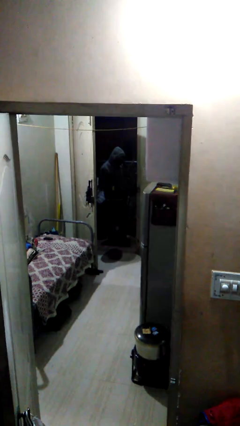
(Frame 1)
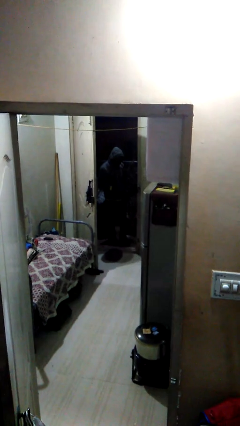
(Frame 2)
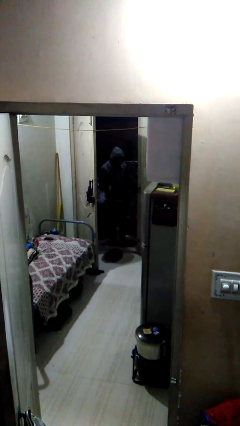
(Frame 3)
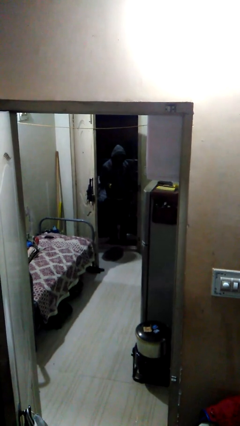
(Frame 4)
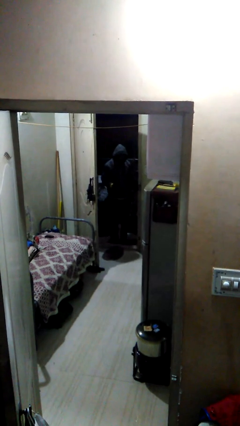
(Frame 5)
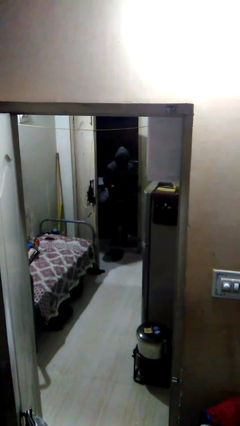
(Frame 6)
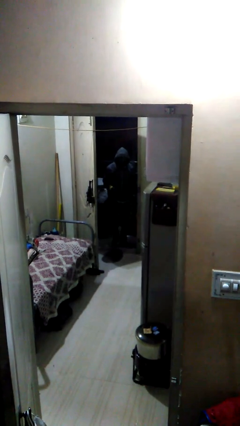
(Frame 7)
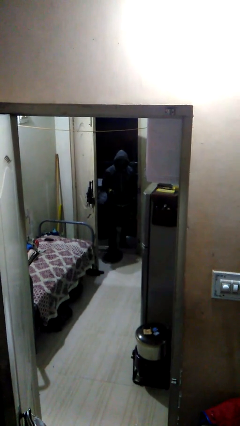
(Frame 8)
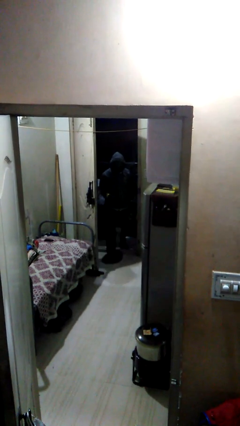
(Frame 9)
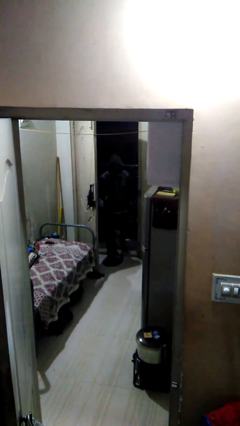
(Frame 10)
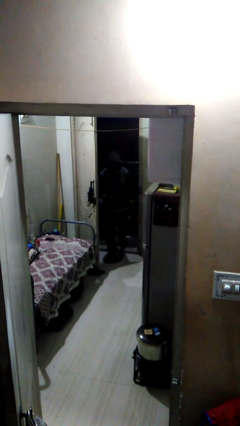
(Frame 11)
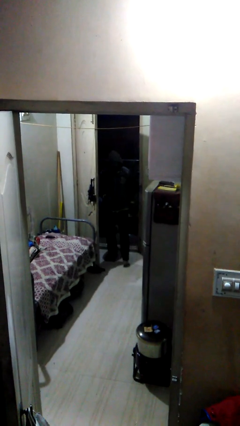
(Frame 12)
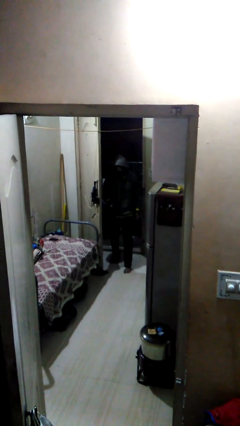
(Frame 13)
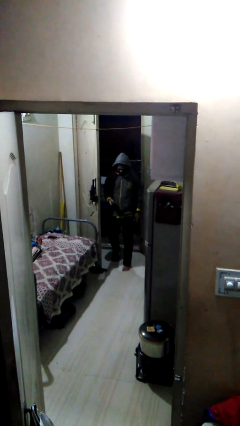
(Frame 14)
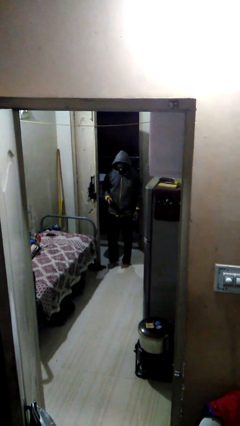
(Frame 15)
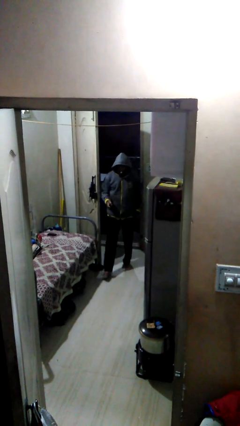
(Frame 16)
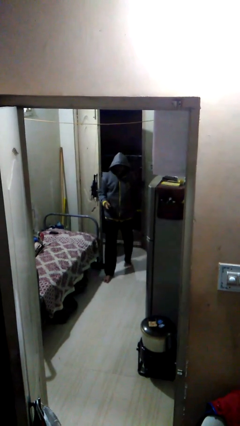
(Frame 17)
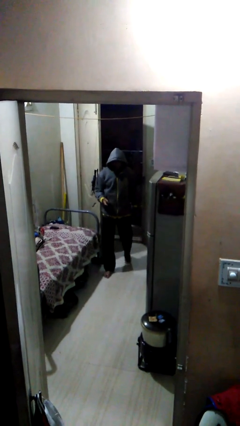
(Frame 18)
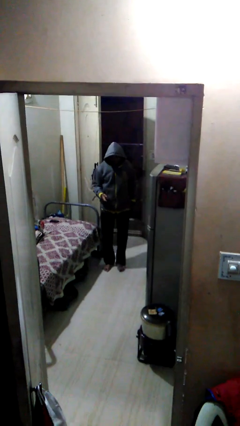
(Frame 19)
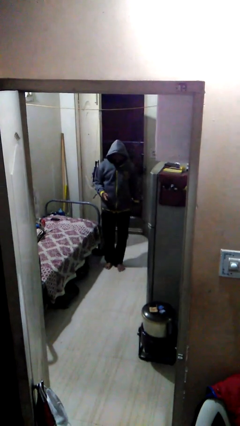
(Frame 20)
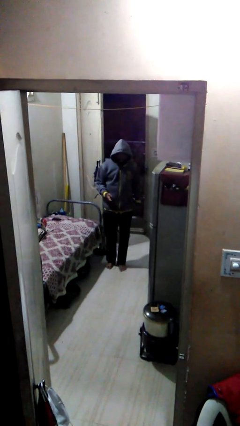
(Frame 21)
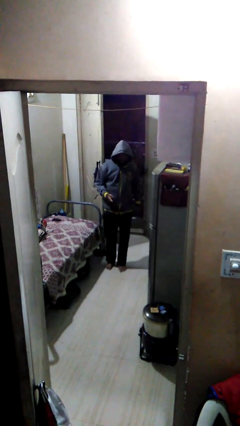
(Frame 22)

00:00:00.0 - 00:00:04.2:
person enters scene through structure

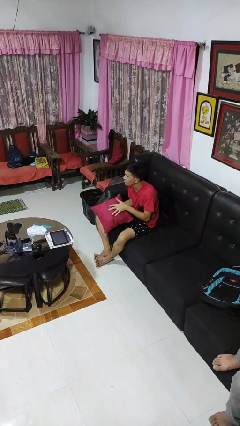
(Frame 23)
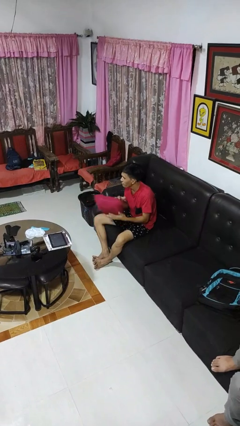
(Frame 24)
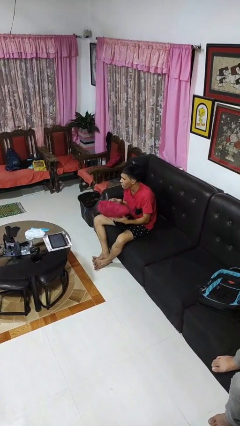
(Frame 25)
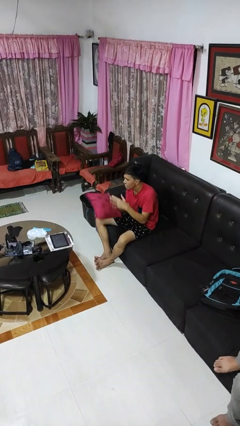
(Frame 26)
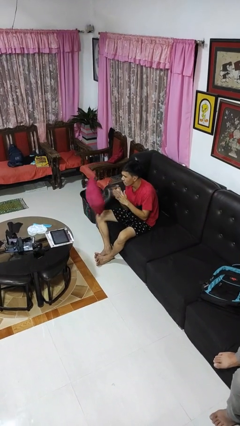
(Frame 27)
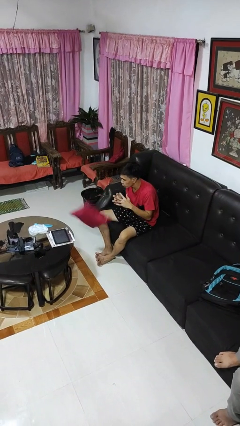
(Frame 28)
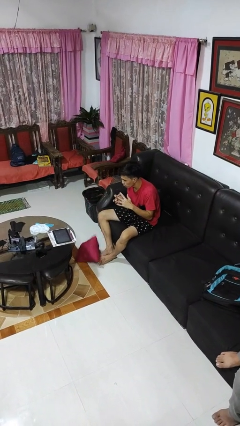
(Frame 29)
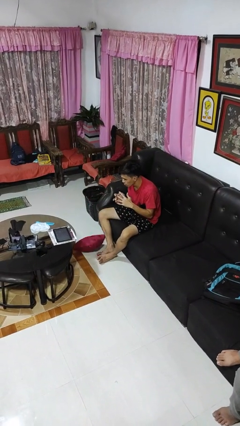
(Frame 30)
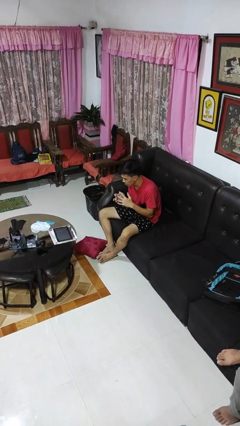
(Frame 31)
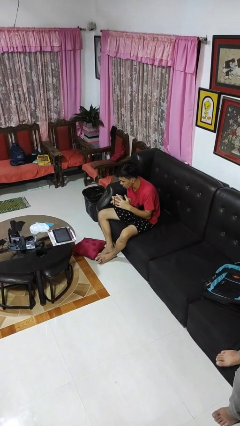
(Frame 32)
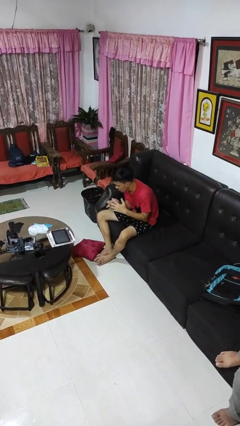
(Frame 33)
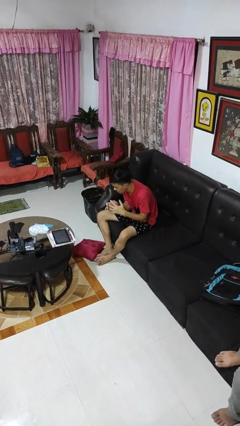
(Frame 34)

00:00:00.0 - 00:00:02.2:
person drops object

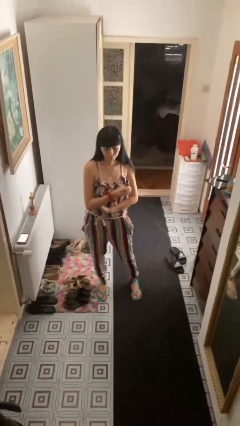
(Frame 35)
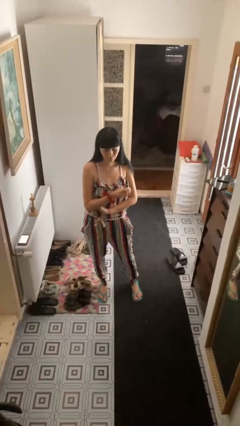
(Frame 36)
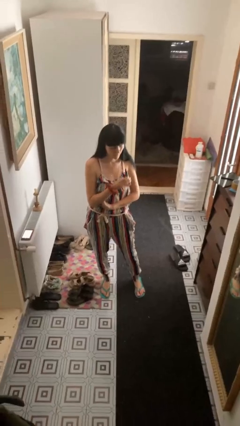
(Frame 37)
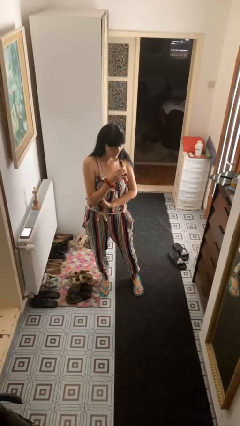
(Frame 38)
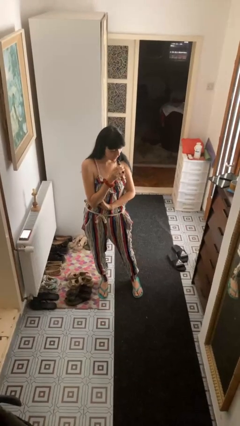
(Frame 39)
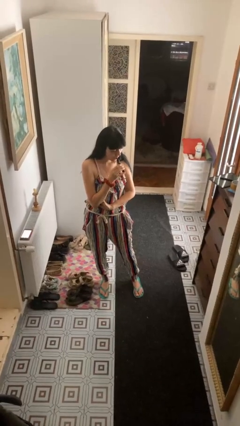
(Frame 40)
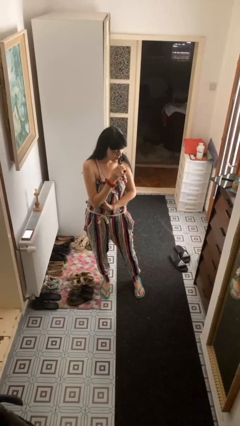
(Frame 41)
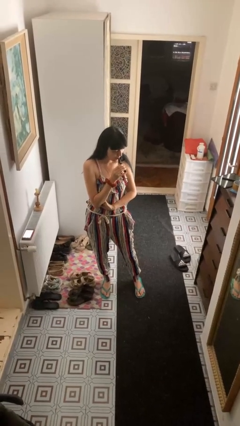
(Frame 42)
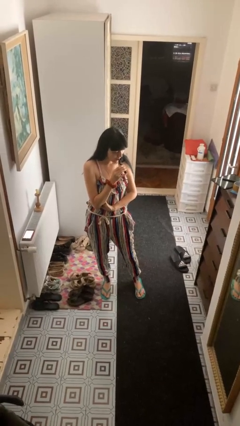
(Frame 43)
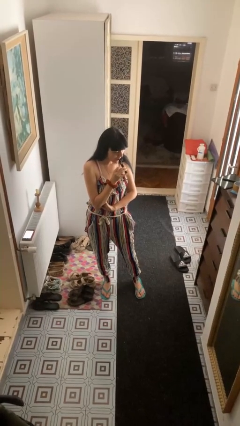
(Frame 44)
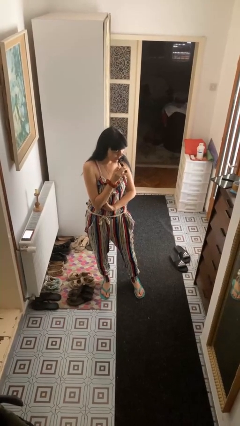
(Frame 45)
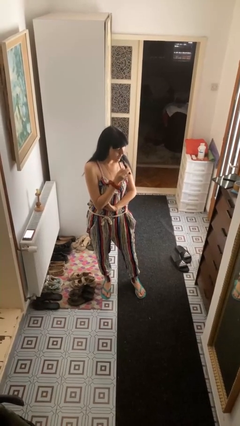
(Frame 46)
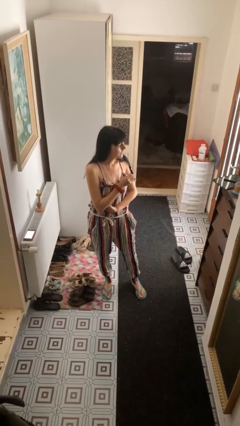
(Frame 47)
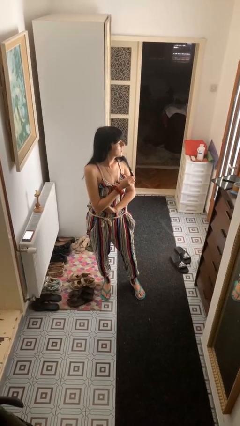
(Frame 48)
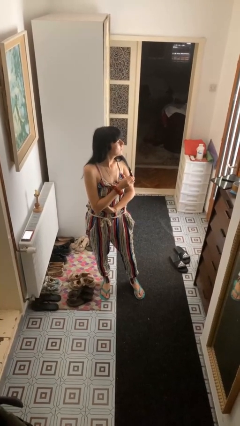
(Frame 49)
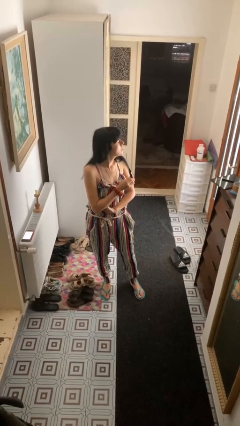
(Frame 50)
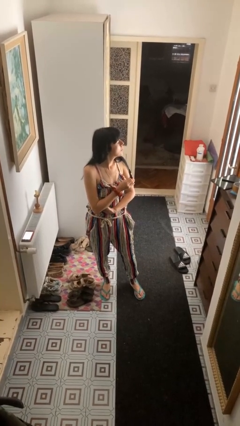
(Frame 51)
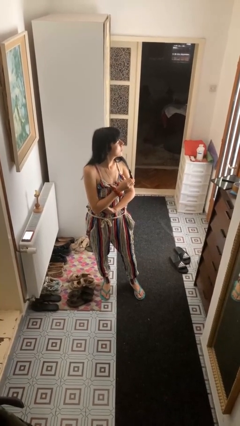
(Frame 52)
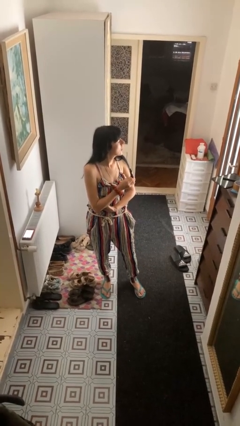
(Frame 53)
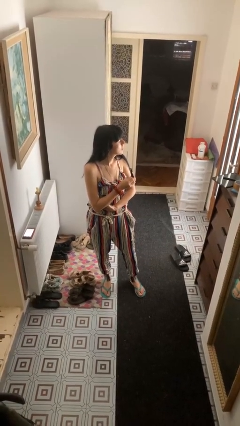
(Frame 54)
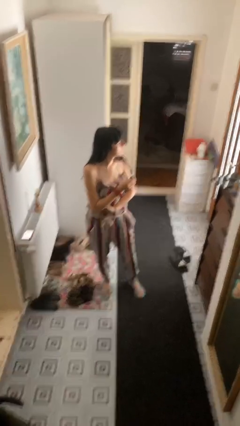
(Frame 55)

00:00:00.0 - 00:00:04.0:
person vapes

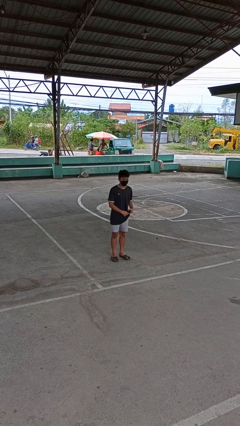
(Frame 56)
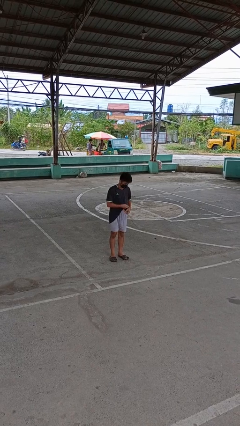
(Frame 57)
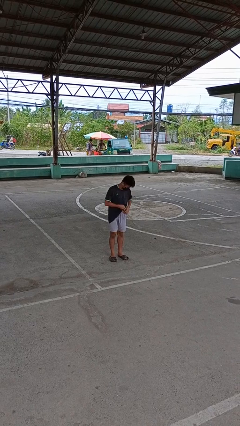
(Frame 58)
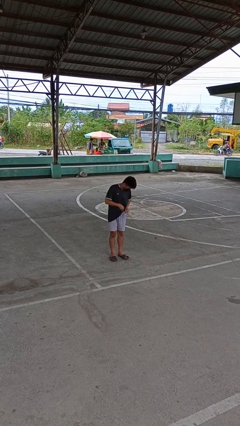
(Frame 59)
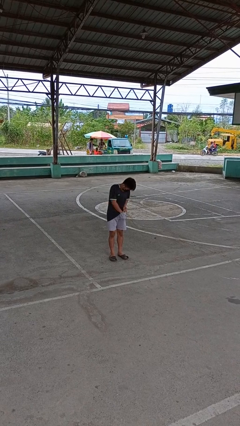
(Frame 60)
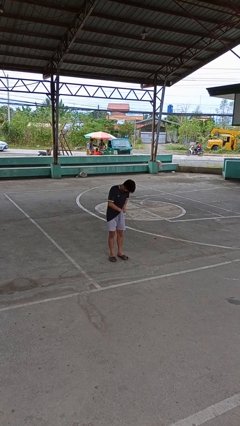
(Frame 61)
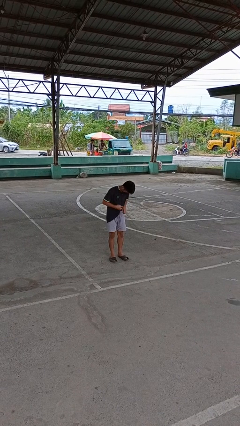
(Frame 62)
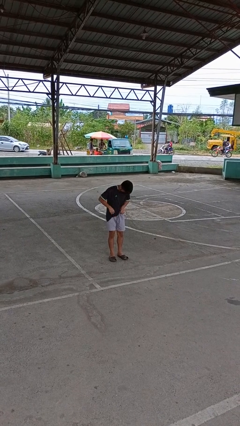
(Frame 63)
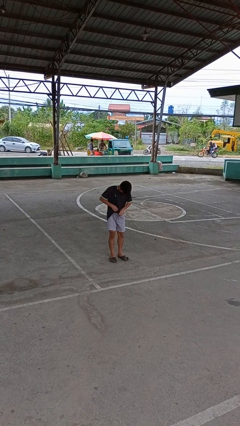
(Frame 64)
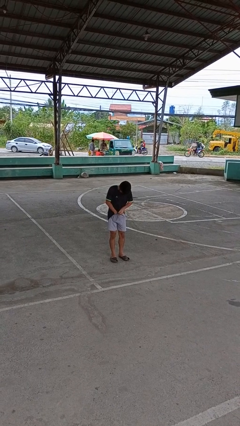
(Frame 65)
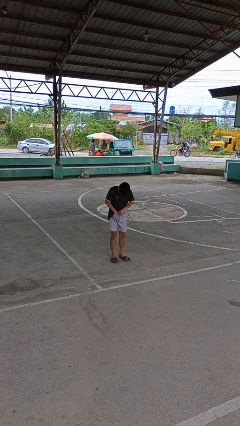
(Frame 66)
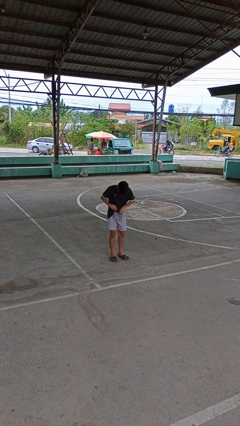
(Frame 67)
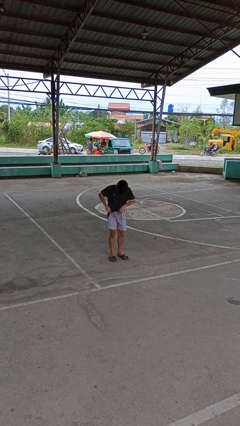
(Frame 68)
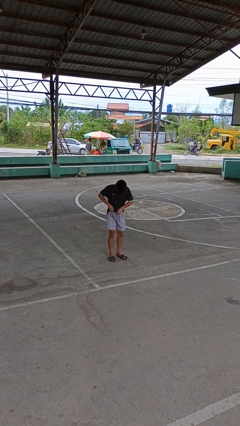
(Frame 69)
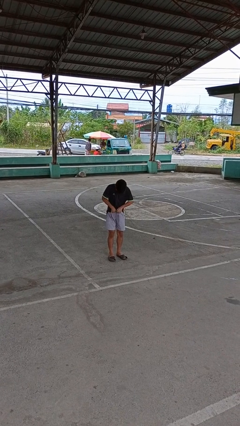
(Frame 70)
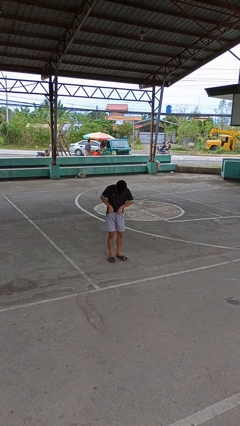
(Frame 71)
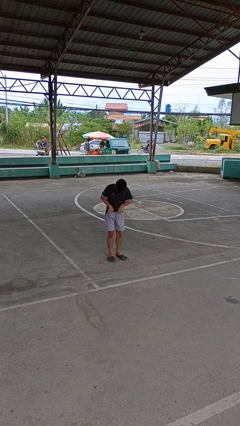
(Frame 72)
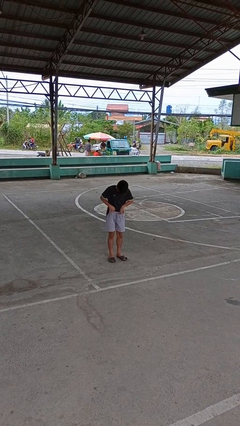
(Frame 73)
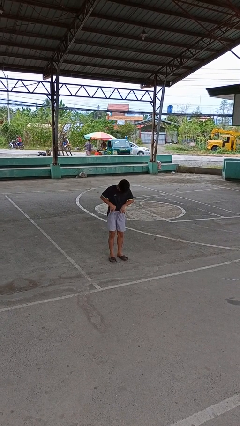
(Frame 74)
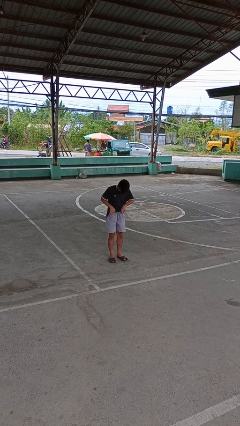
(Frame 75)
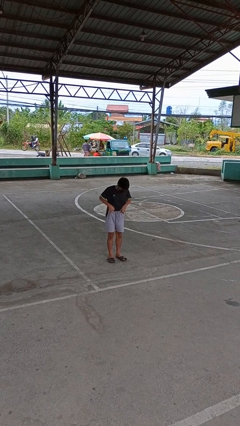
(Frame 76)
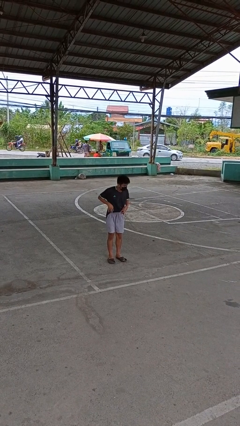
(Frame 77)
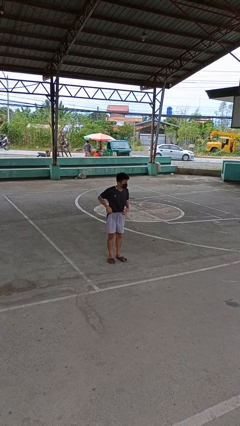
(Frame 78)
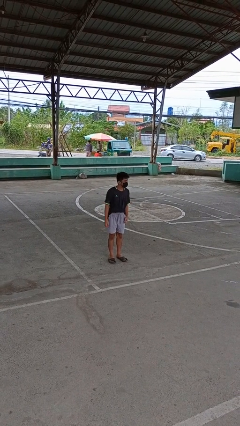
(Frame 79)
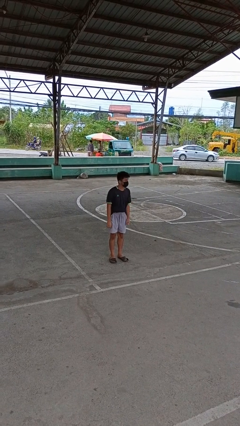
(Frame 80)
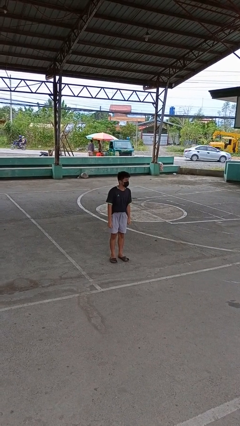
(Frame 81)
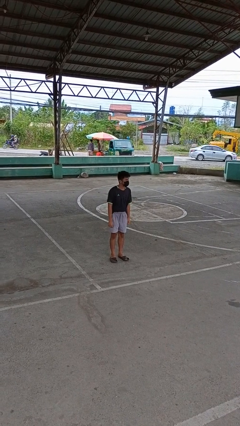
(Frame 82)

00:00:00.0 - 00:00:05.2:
person tucks in shirt

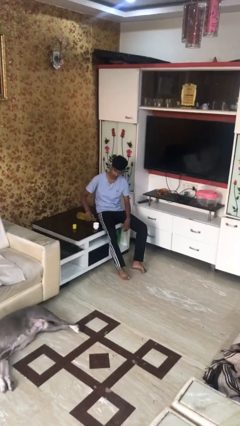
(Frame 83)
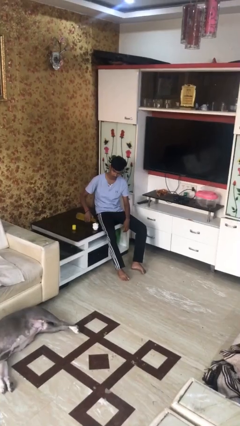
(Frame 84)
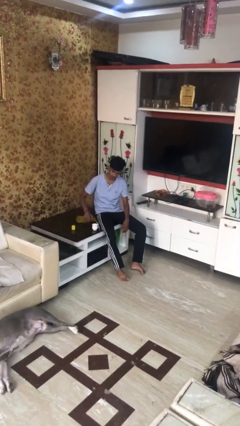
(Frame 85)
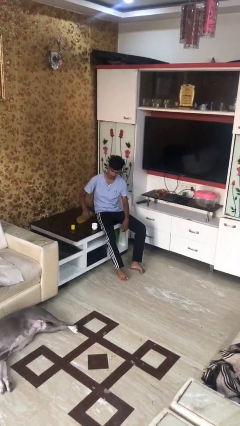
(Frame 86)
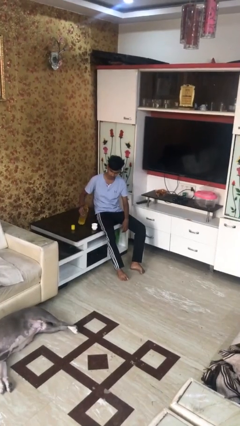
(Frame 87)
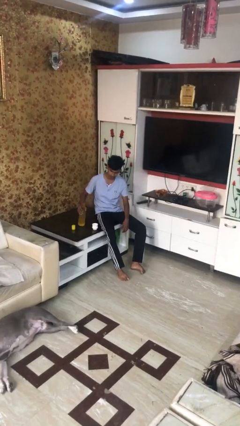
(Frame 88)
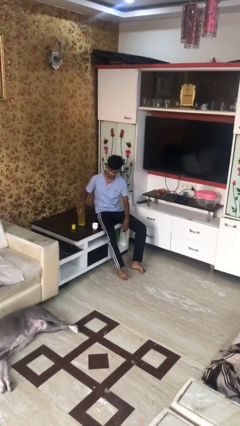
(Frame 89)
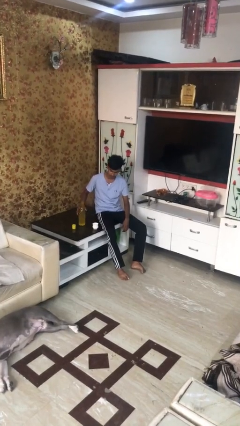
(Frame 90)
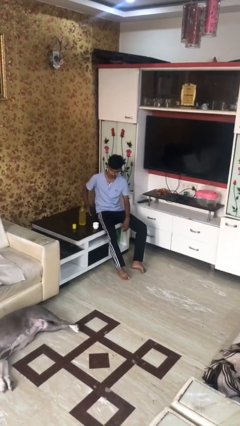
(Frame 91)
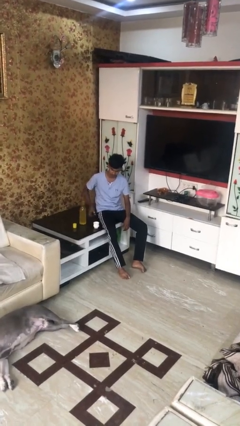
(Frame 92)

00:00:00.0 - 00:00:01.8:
person pours liquid into cup
